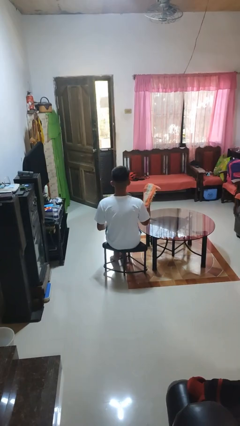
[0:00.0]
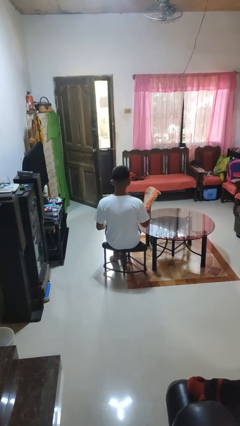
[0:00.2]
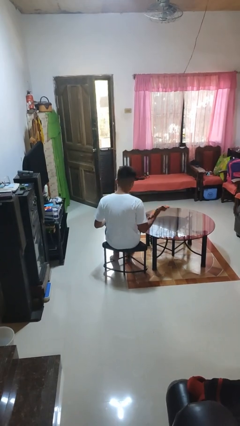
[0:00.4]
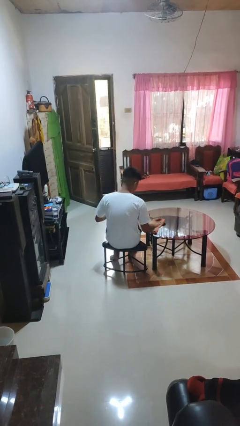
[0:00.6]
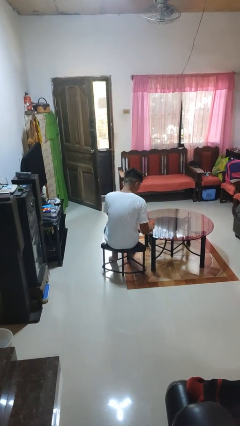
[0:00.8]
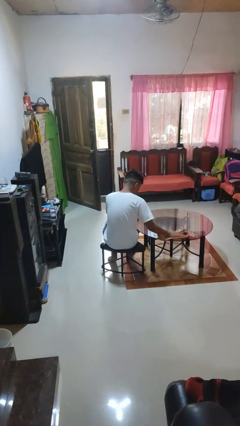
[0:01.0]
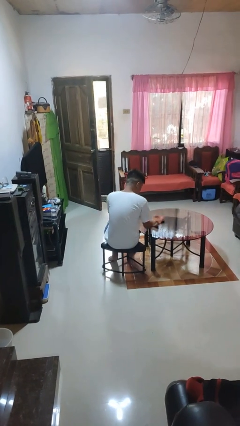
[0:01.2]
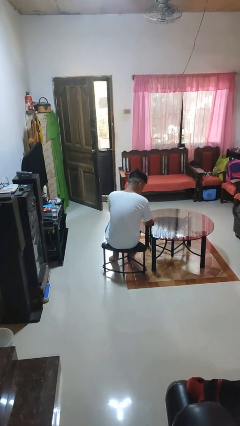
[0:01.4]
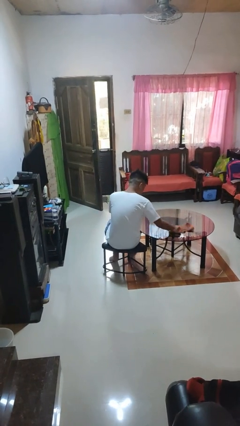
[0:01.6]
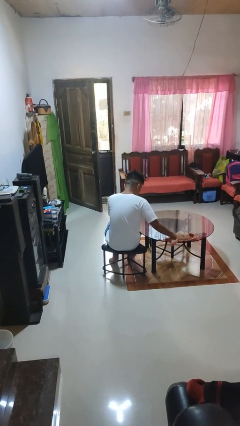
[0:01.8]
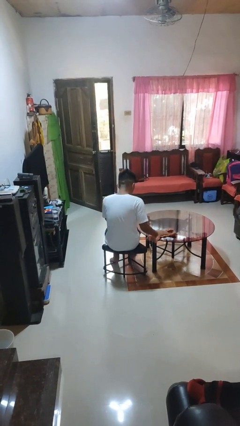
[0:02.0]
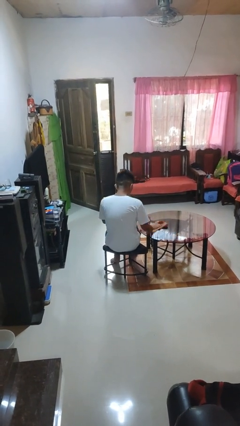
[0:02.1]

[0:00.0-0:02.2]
person cleans table with rag

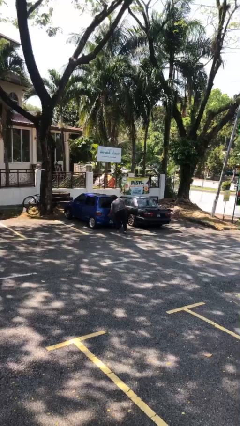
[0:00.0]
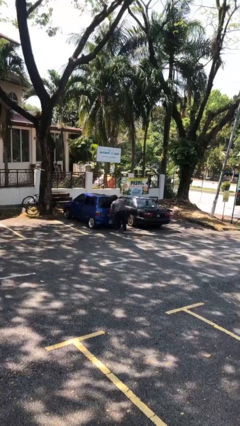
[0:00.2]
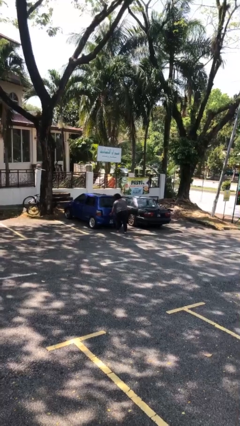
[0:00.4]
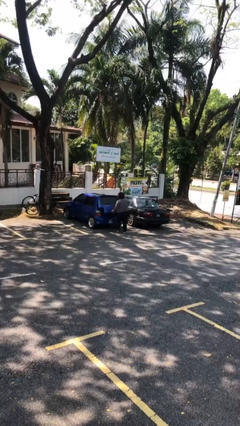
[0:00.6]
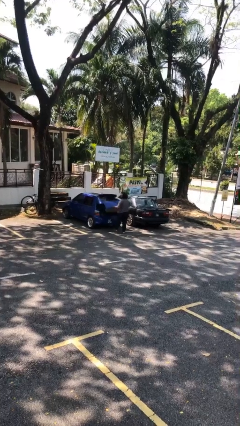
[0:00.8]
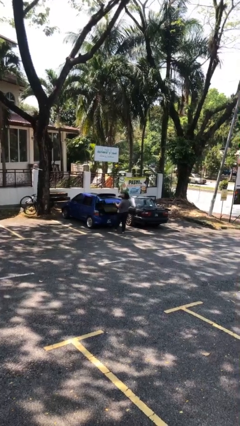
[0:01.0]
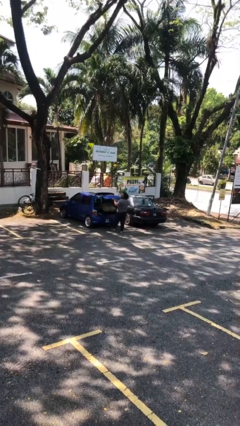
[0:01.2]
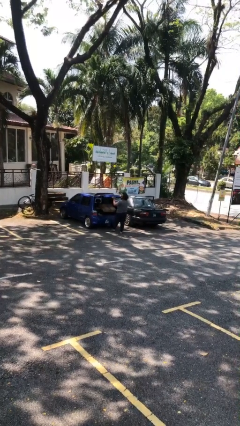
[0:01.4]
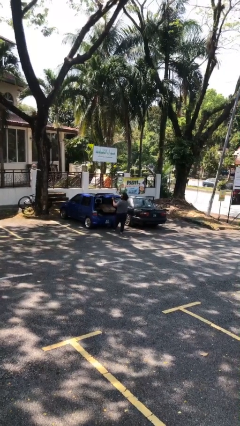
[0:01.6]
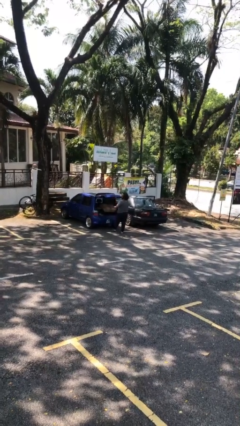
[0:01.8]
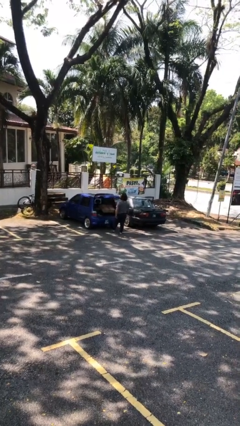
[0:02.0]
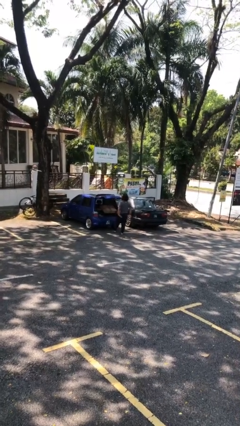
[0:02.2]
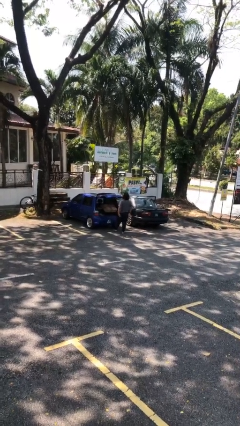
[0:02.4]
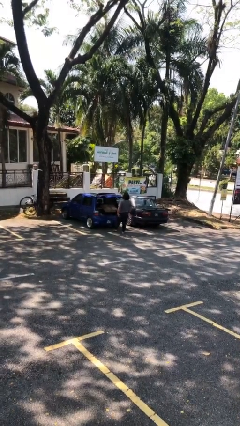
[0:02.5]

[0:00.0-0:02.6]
person opens car trunk

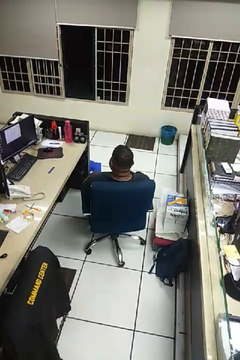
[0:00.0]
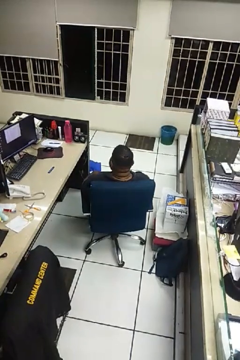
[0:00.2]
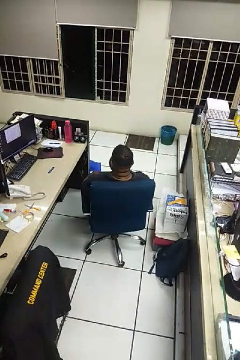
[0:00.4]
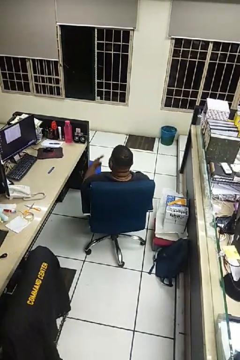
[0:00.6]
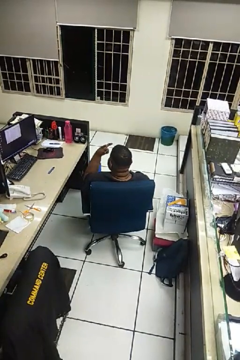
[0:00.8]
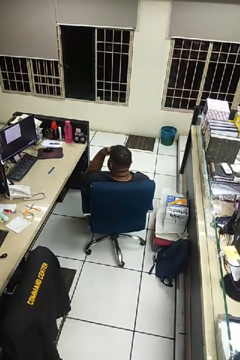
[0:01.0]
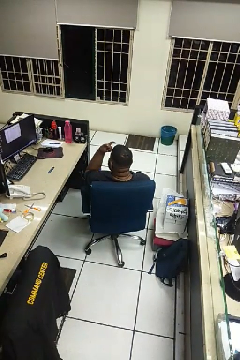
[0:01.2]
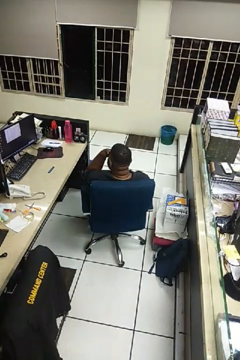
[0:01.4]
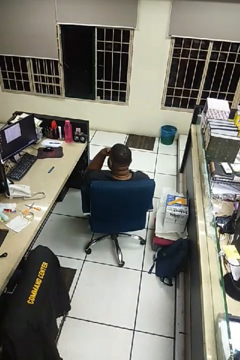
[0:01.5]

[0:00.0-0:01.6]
person gestures watch closely

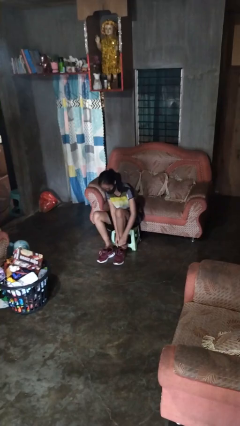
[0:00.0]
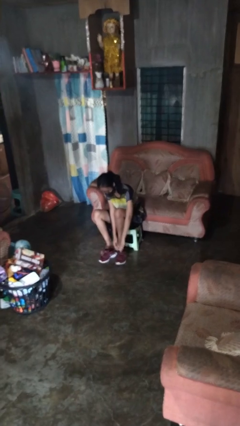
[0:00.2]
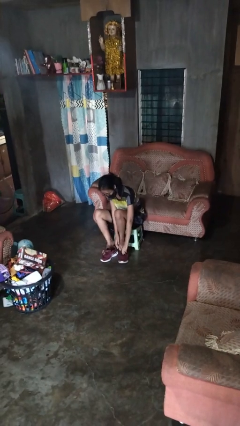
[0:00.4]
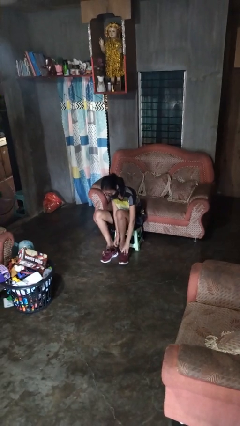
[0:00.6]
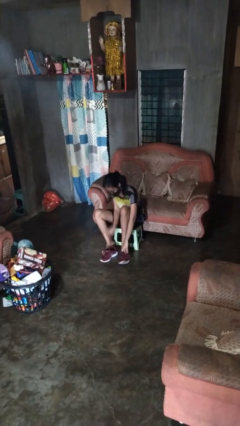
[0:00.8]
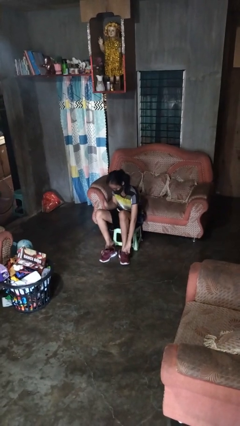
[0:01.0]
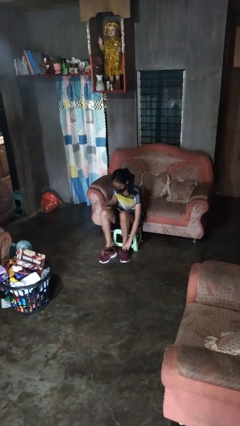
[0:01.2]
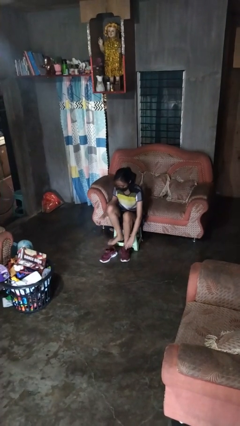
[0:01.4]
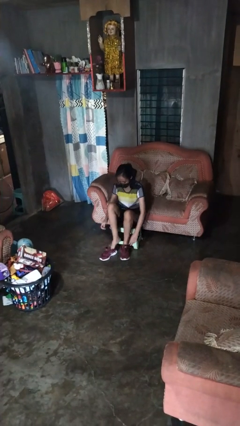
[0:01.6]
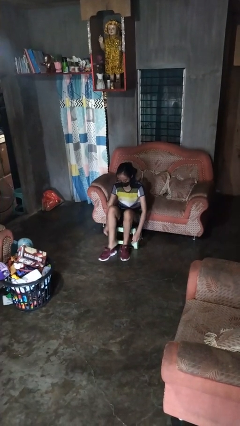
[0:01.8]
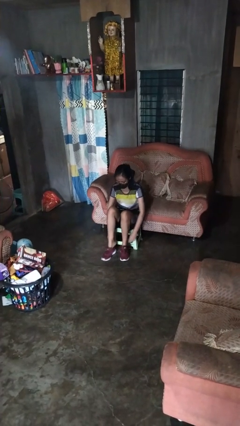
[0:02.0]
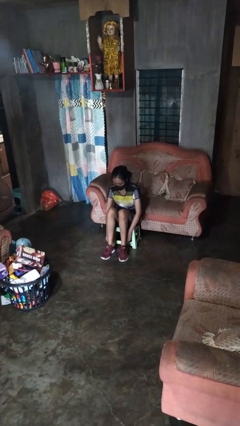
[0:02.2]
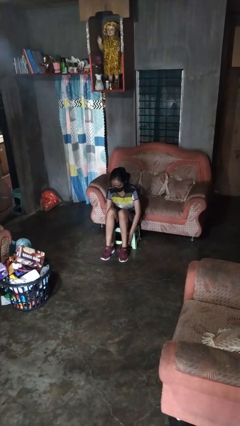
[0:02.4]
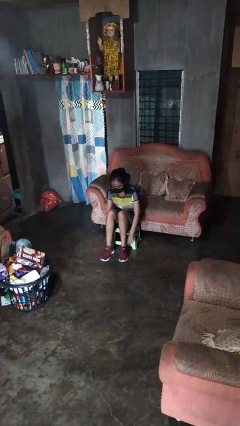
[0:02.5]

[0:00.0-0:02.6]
person puts on shoes

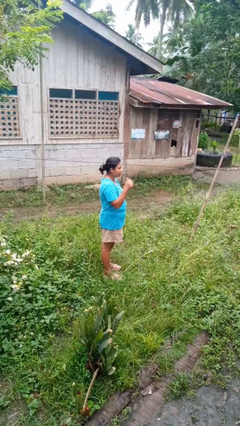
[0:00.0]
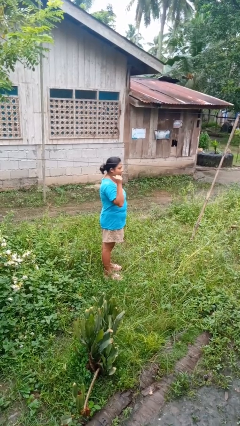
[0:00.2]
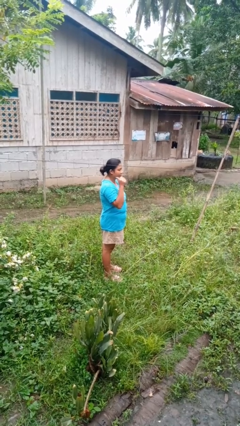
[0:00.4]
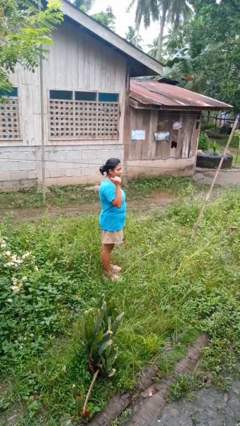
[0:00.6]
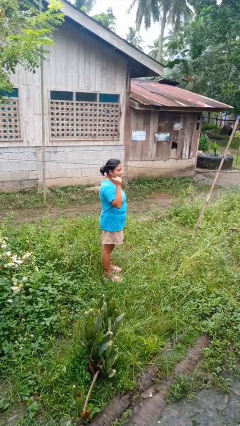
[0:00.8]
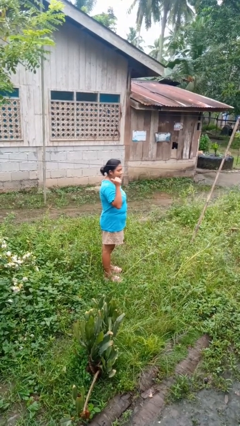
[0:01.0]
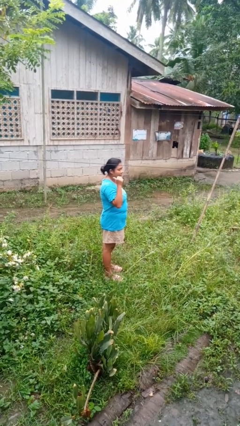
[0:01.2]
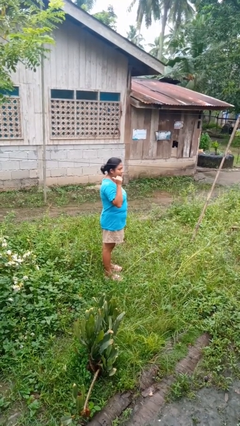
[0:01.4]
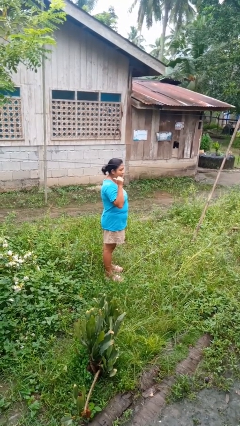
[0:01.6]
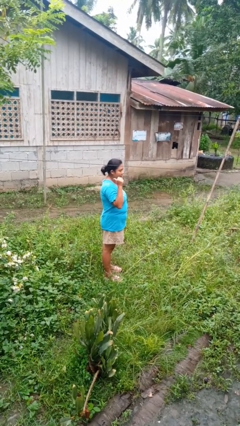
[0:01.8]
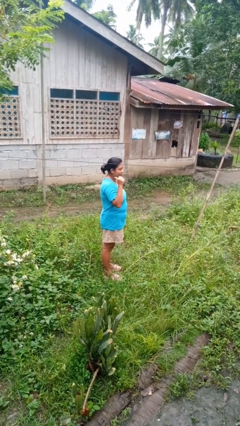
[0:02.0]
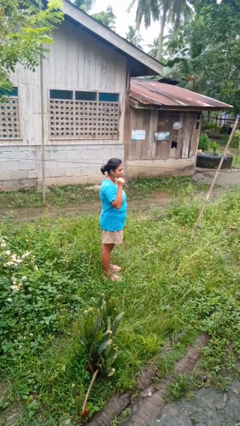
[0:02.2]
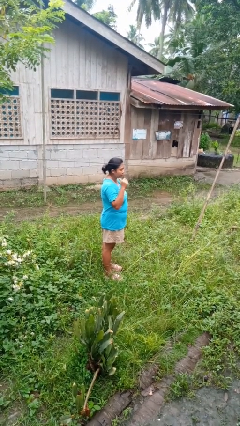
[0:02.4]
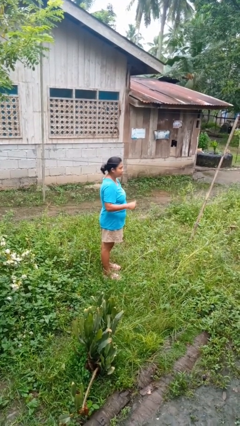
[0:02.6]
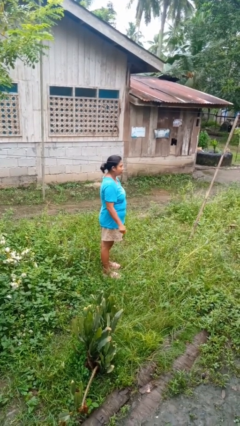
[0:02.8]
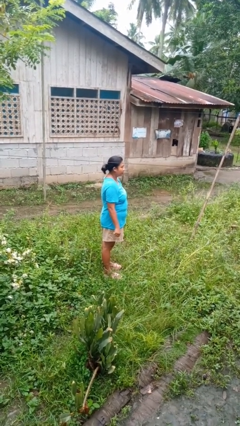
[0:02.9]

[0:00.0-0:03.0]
person gestures behind me

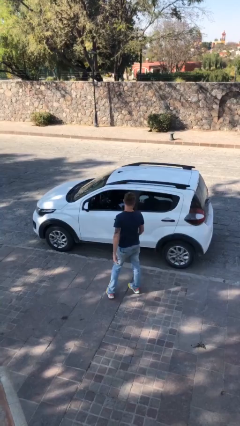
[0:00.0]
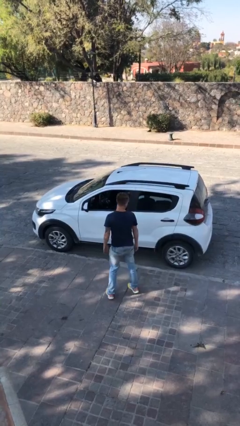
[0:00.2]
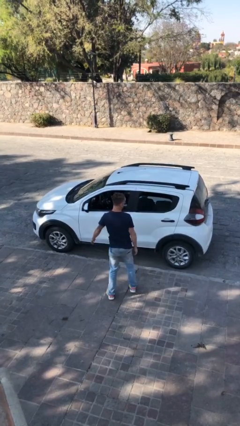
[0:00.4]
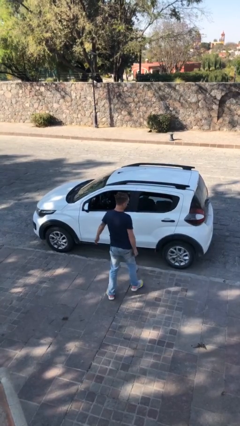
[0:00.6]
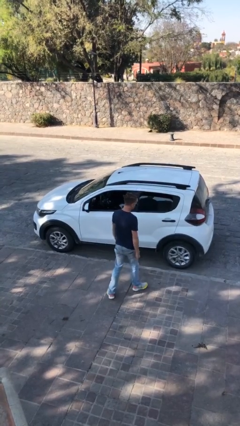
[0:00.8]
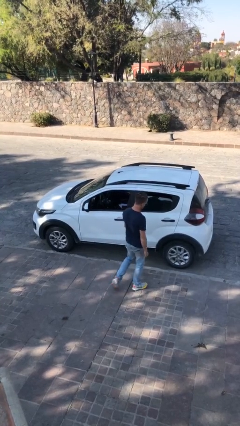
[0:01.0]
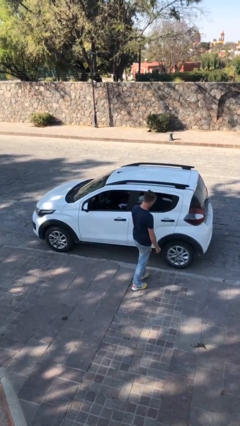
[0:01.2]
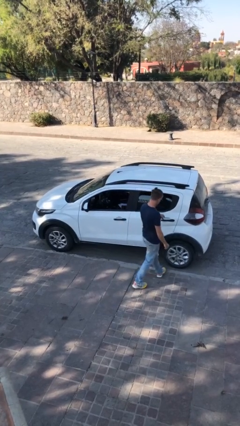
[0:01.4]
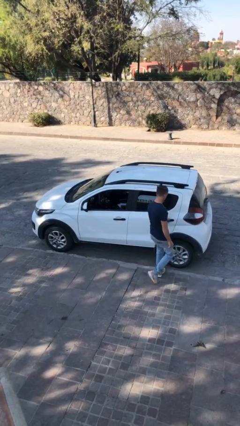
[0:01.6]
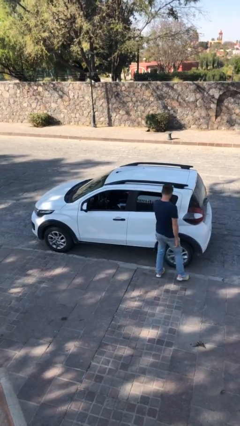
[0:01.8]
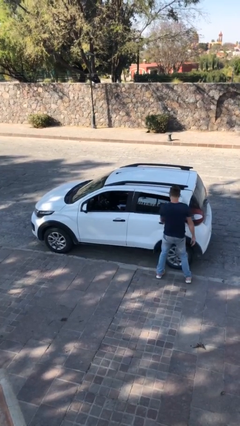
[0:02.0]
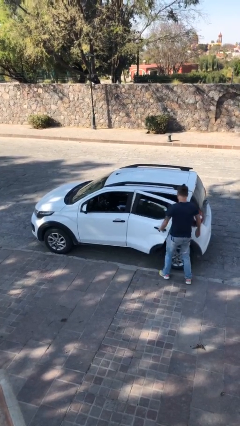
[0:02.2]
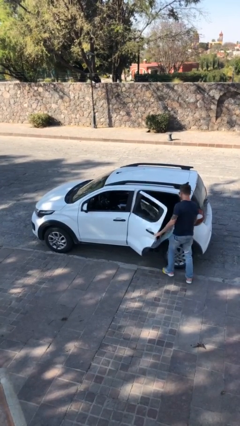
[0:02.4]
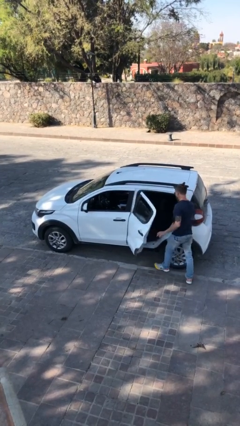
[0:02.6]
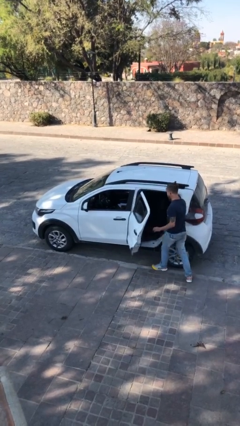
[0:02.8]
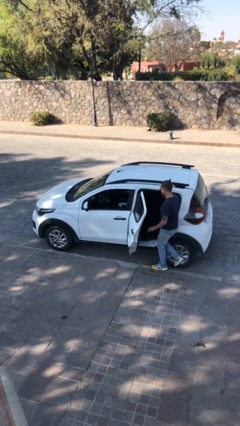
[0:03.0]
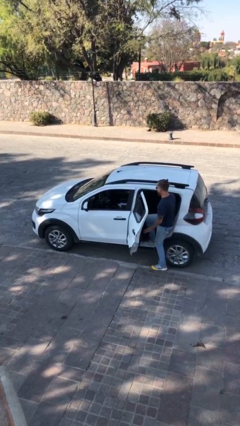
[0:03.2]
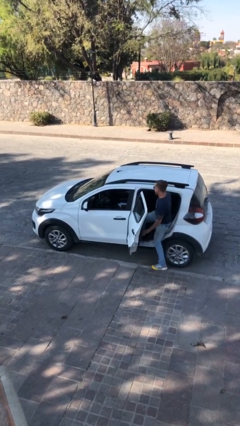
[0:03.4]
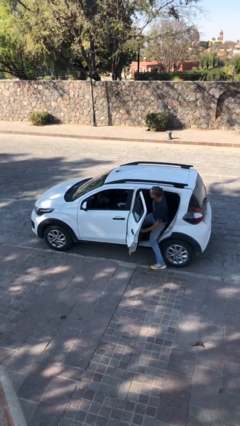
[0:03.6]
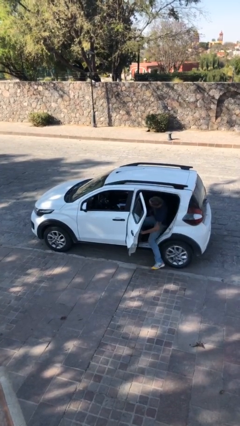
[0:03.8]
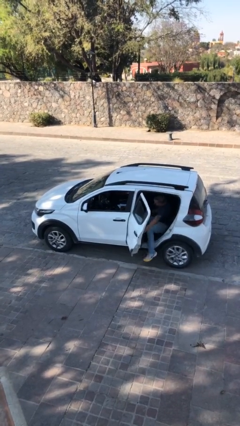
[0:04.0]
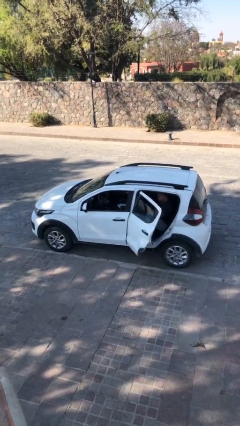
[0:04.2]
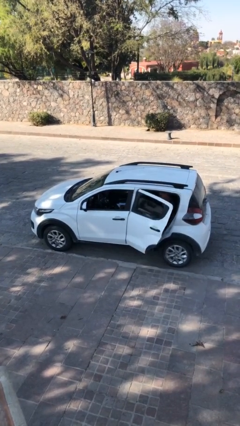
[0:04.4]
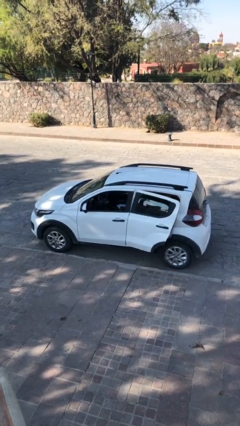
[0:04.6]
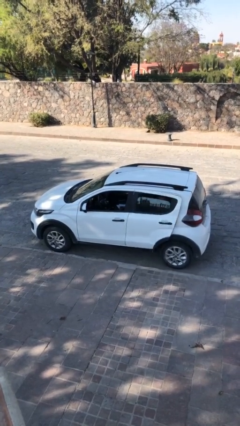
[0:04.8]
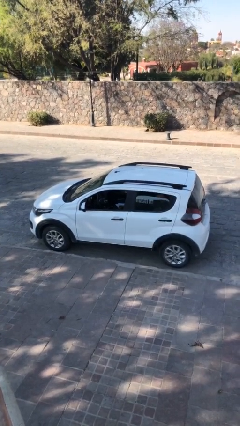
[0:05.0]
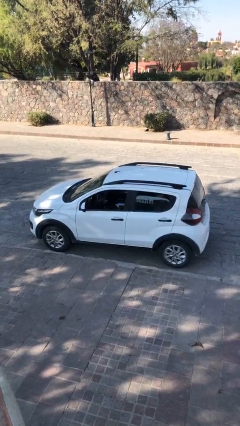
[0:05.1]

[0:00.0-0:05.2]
car picks up person

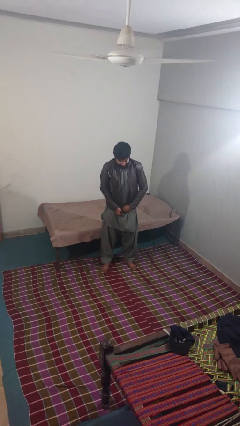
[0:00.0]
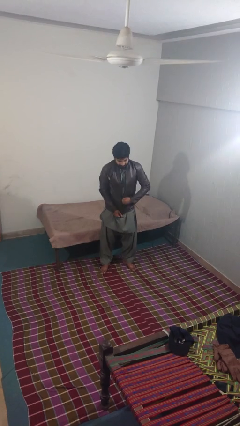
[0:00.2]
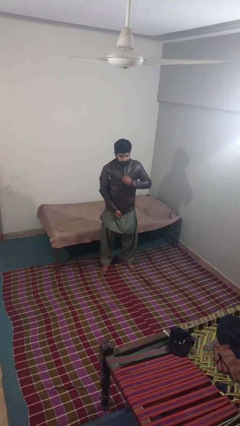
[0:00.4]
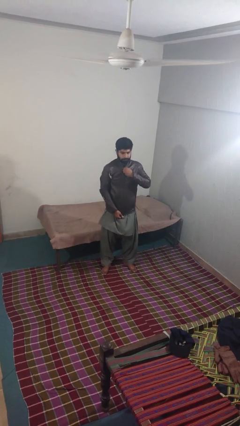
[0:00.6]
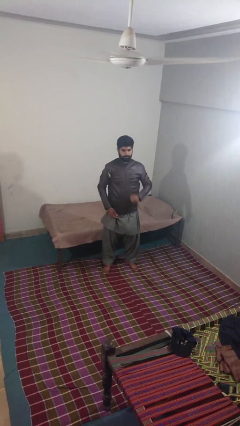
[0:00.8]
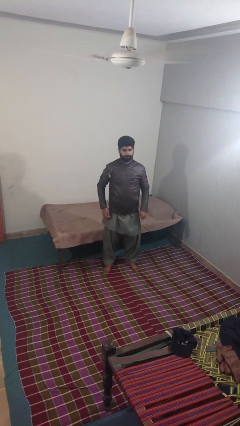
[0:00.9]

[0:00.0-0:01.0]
person zips up jacket
